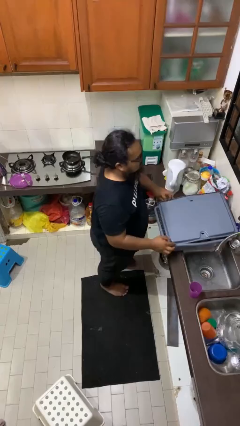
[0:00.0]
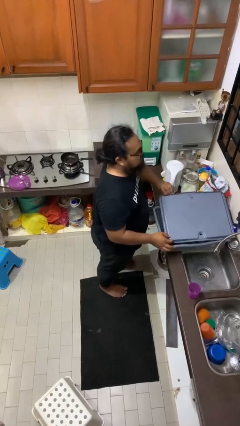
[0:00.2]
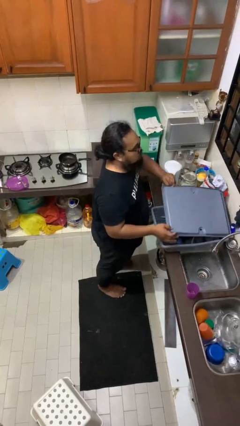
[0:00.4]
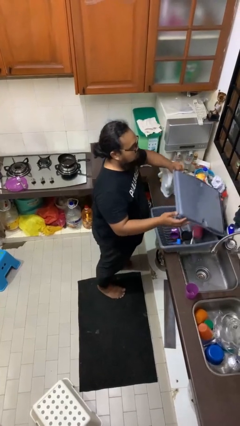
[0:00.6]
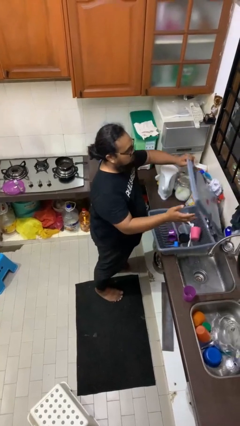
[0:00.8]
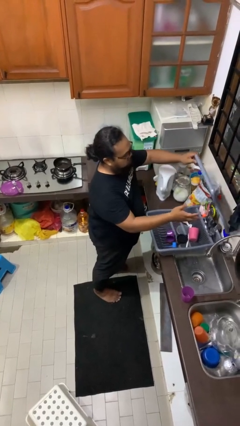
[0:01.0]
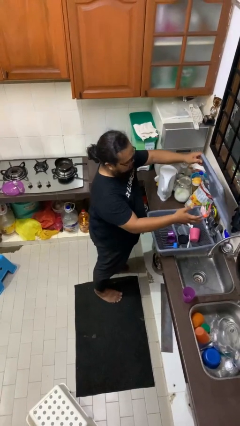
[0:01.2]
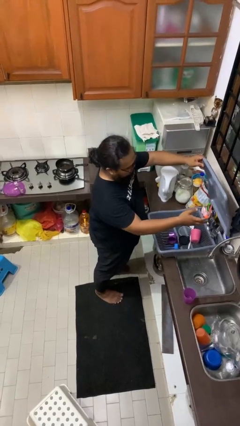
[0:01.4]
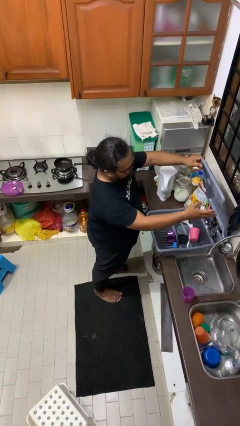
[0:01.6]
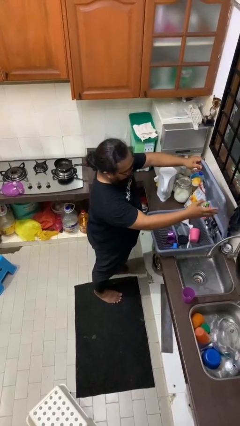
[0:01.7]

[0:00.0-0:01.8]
person opens dishwasher

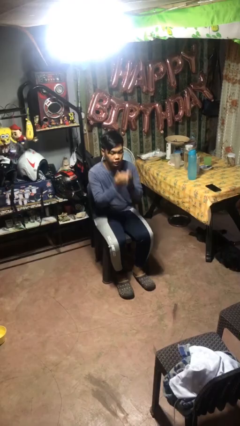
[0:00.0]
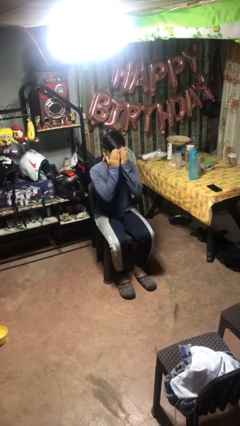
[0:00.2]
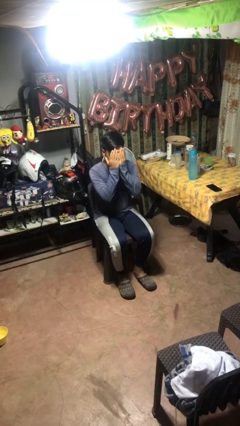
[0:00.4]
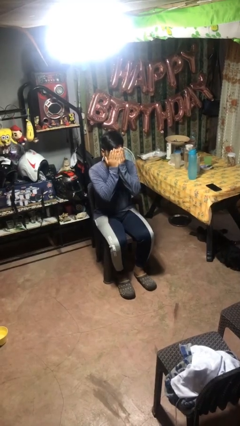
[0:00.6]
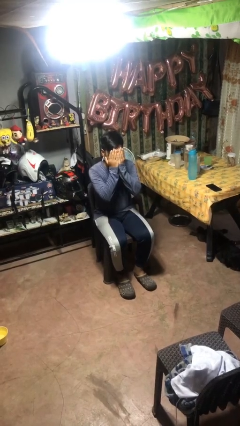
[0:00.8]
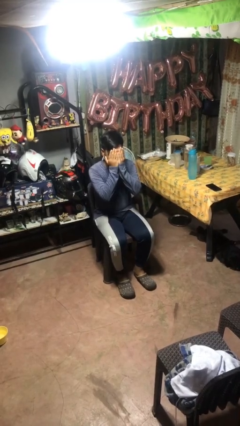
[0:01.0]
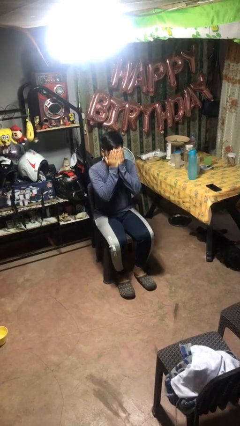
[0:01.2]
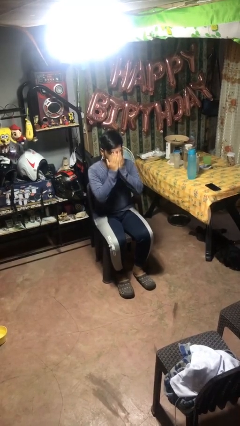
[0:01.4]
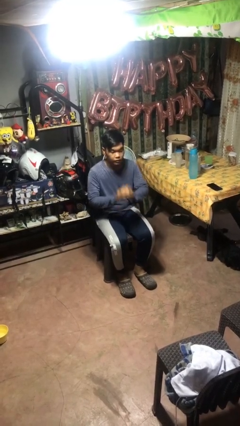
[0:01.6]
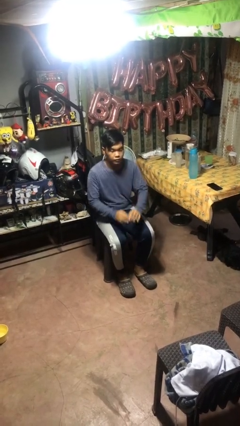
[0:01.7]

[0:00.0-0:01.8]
person covers face with hands

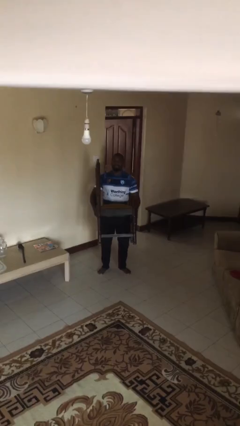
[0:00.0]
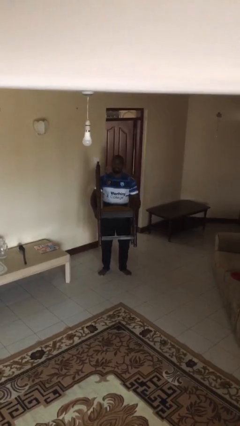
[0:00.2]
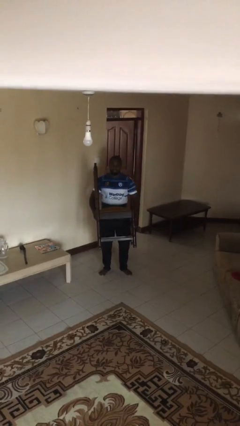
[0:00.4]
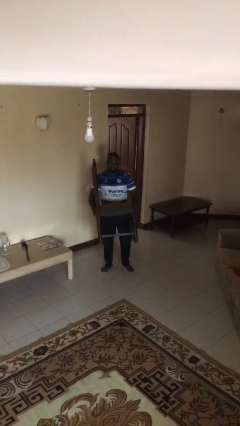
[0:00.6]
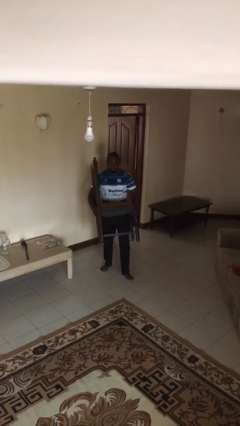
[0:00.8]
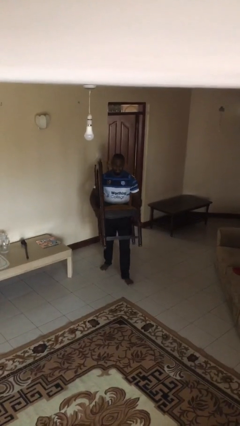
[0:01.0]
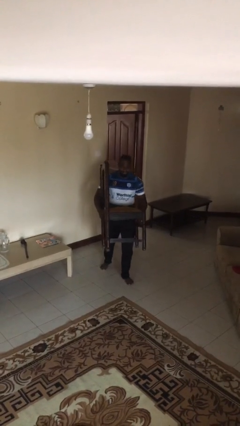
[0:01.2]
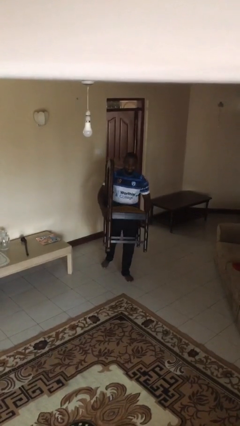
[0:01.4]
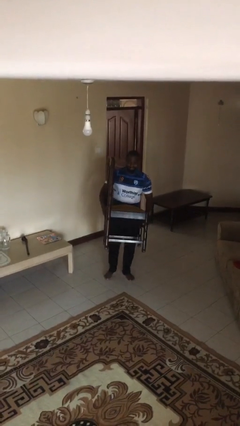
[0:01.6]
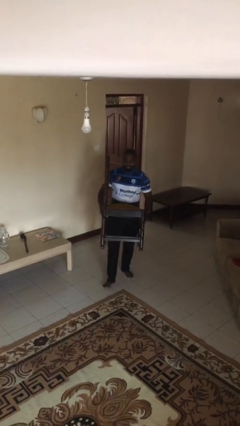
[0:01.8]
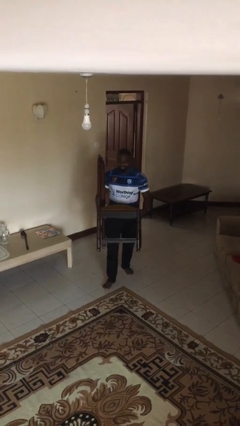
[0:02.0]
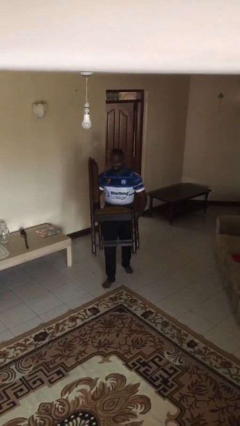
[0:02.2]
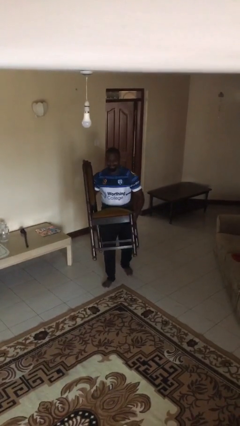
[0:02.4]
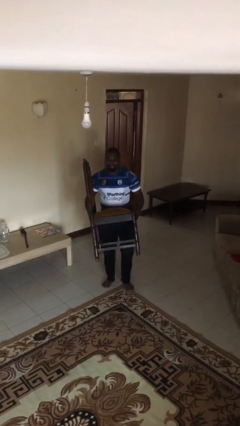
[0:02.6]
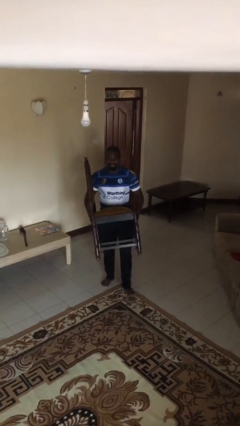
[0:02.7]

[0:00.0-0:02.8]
person carries heavy object

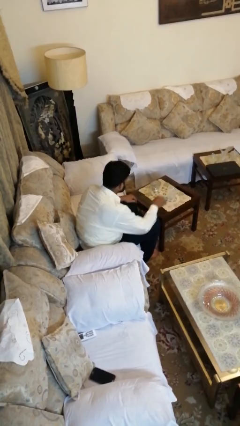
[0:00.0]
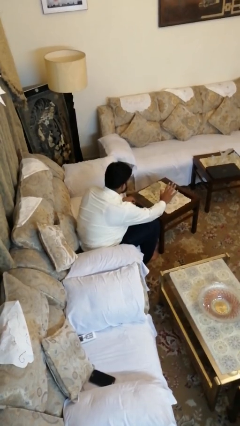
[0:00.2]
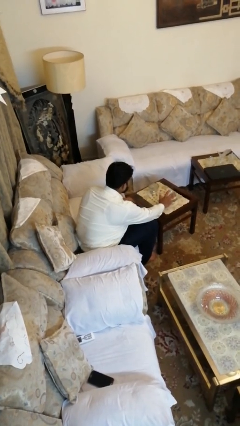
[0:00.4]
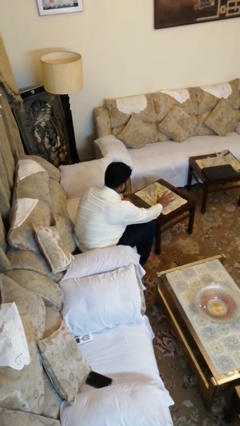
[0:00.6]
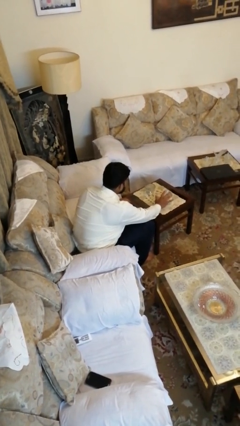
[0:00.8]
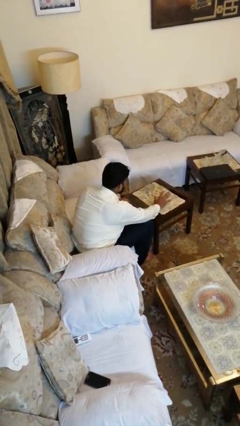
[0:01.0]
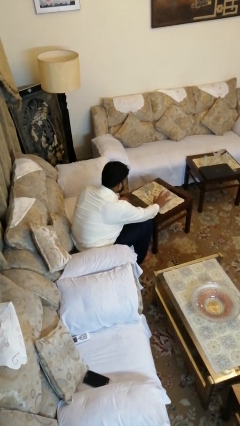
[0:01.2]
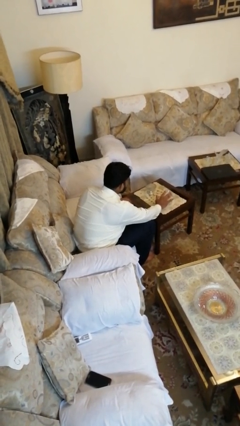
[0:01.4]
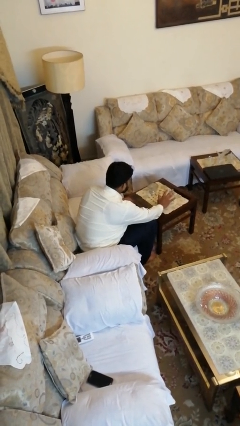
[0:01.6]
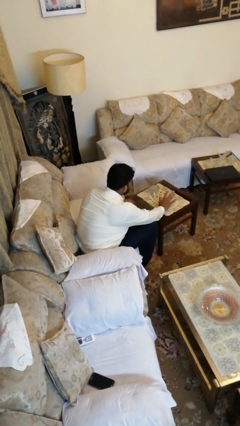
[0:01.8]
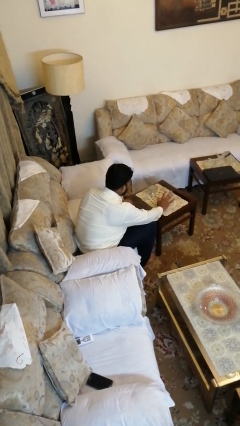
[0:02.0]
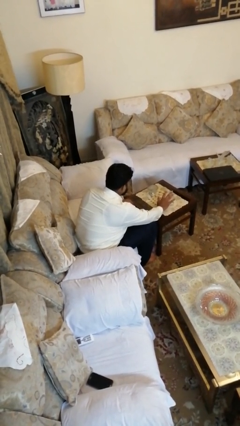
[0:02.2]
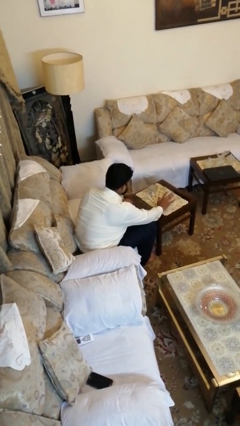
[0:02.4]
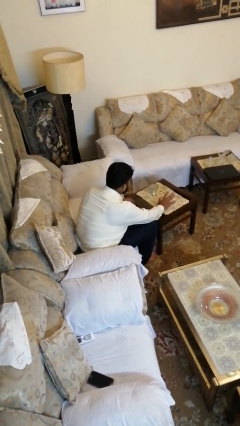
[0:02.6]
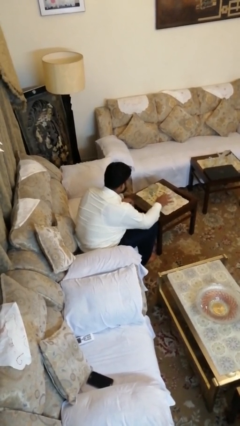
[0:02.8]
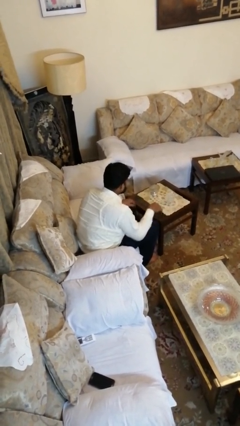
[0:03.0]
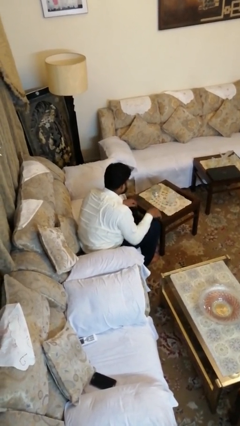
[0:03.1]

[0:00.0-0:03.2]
person taps object with finger

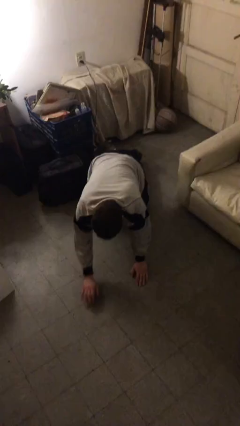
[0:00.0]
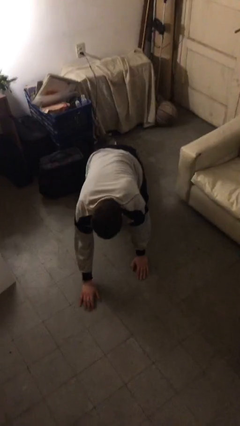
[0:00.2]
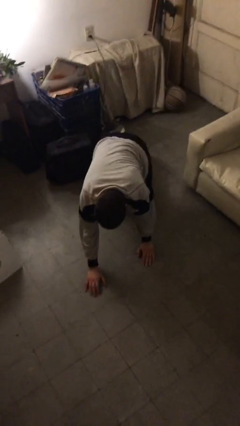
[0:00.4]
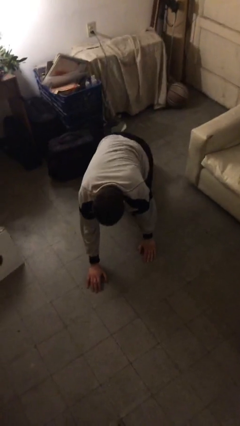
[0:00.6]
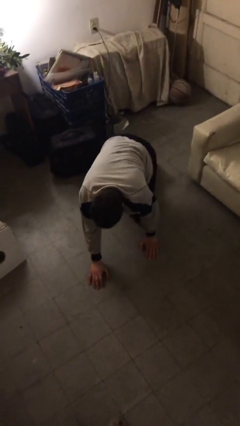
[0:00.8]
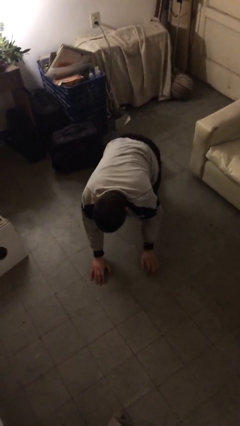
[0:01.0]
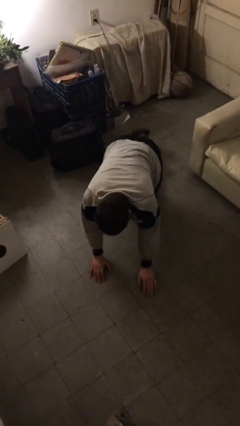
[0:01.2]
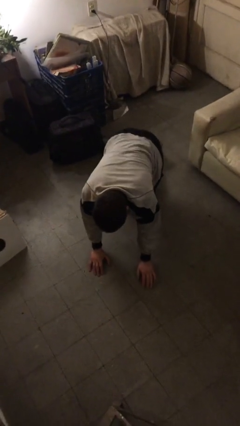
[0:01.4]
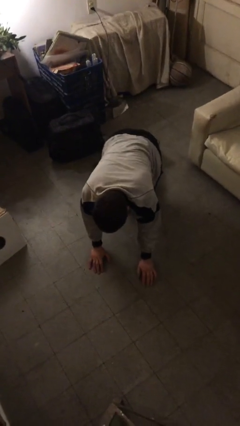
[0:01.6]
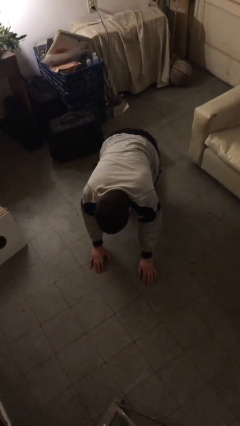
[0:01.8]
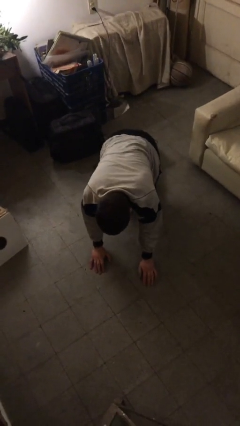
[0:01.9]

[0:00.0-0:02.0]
person crawls

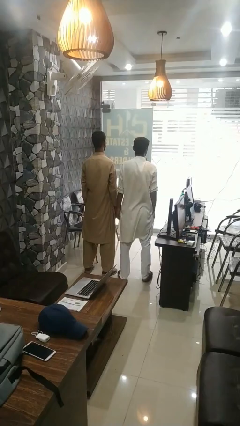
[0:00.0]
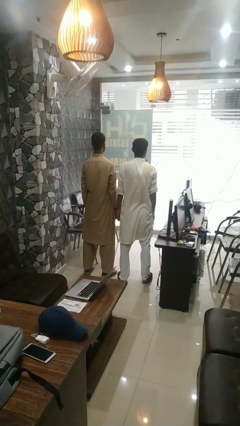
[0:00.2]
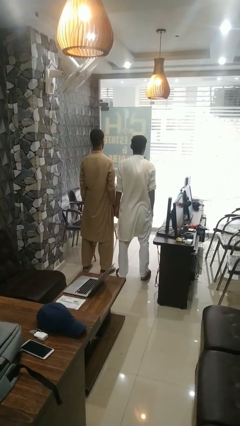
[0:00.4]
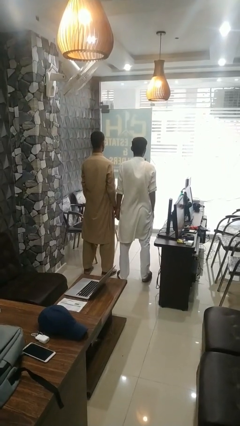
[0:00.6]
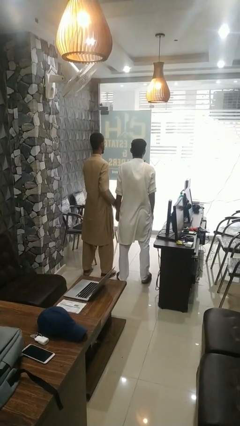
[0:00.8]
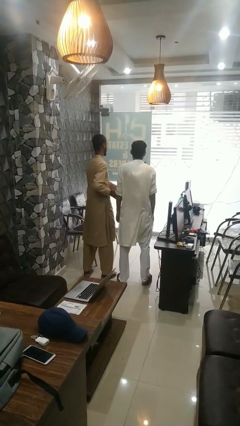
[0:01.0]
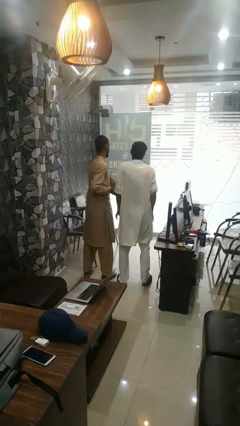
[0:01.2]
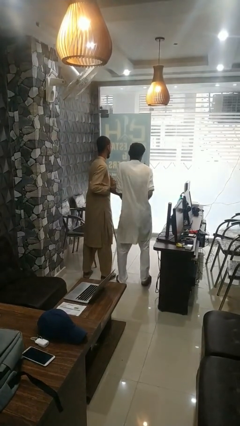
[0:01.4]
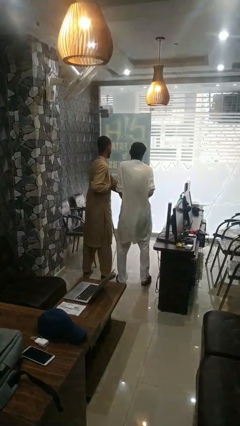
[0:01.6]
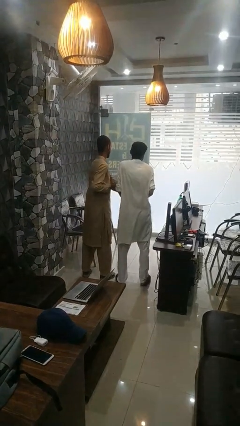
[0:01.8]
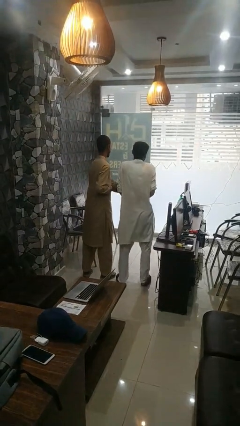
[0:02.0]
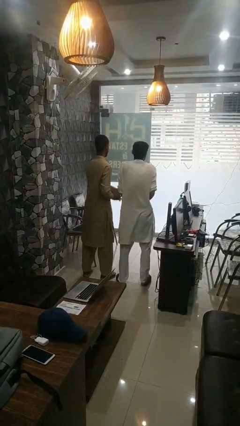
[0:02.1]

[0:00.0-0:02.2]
person tickles person

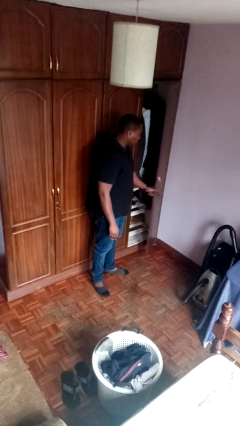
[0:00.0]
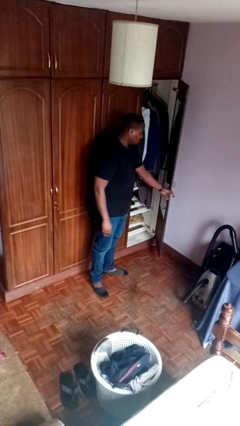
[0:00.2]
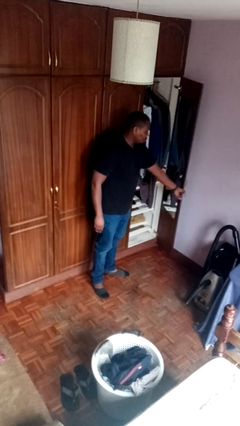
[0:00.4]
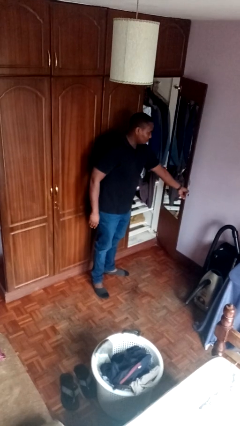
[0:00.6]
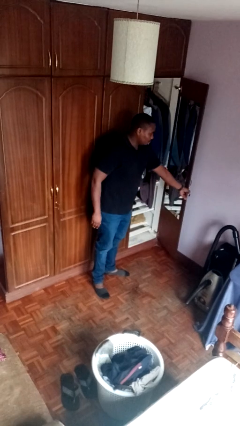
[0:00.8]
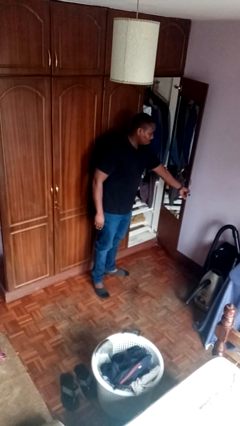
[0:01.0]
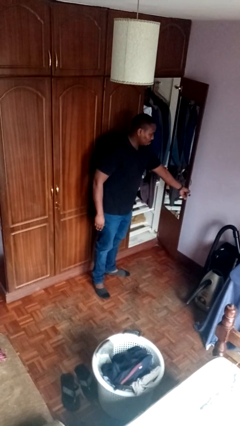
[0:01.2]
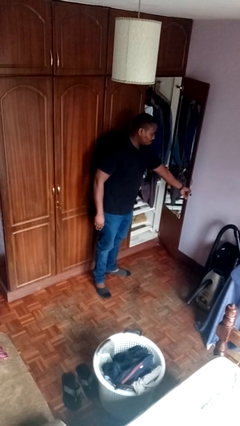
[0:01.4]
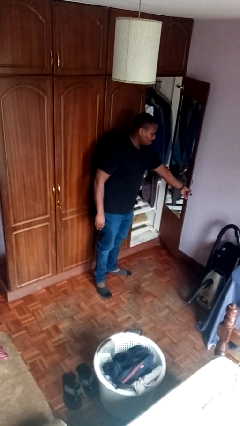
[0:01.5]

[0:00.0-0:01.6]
person opens closet door

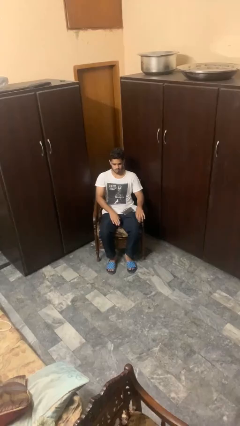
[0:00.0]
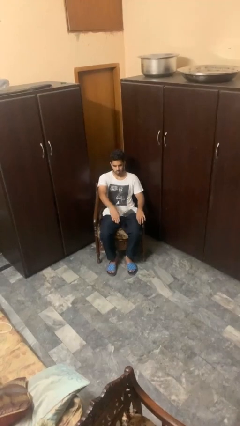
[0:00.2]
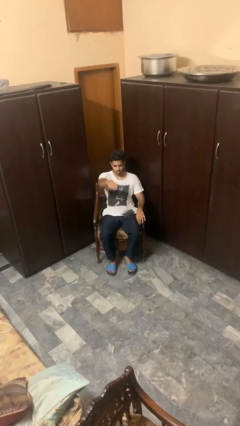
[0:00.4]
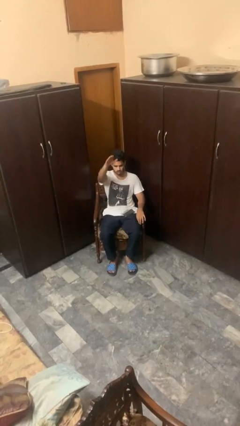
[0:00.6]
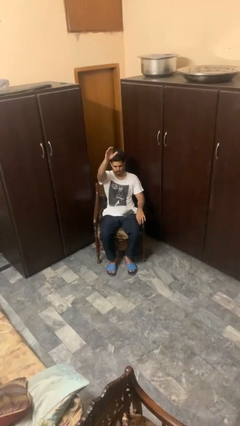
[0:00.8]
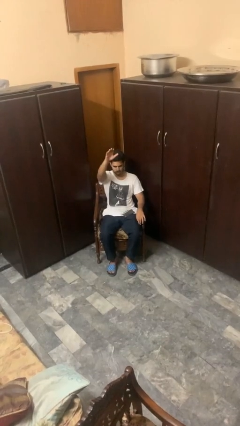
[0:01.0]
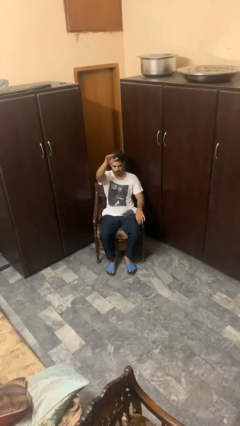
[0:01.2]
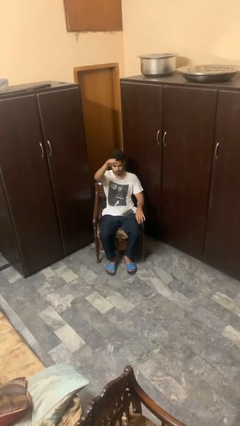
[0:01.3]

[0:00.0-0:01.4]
person gestures swipe up
